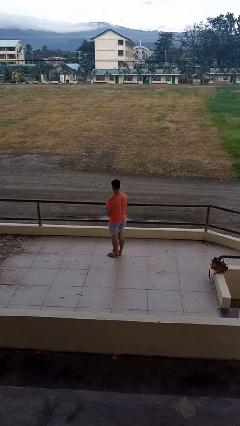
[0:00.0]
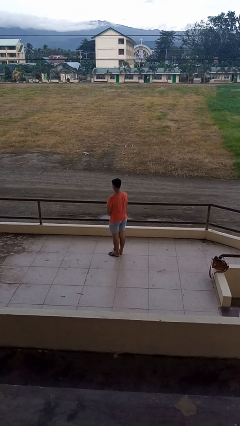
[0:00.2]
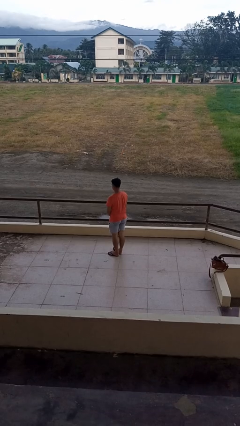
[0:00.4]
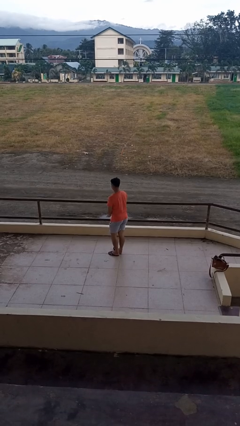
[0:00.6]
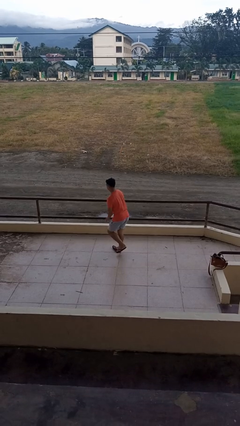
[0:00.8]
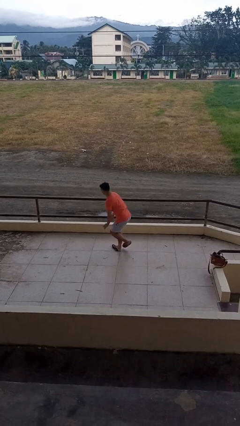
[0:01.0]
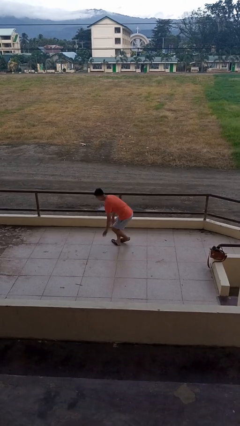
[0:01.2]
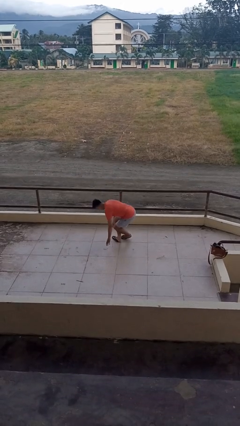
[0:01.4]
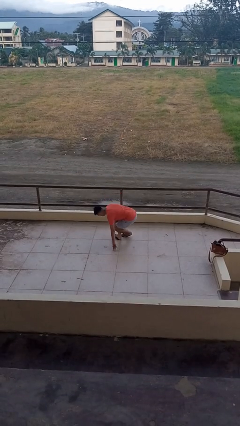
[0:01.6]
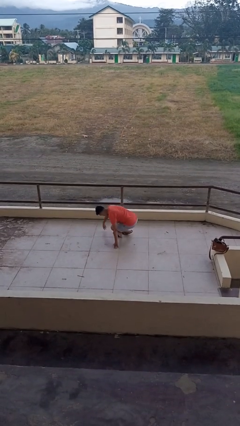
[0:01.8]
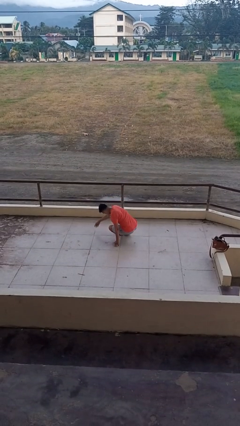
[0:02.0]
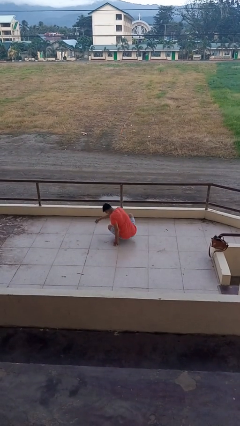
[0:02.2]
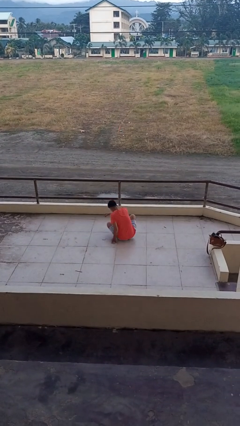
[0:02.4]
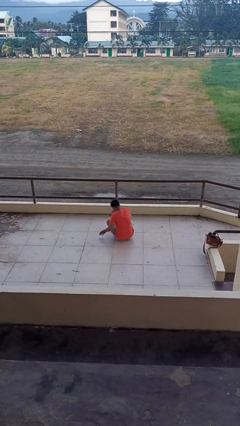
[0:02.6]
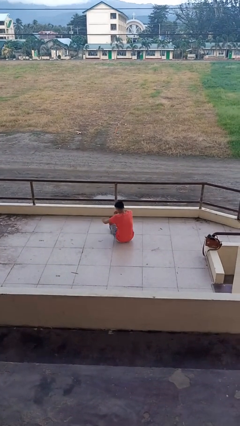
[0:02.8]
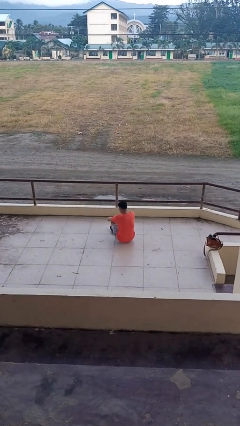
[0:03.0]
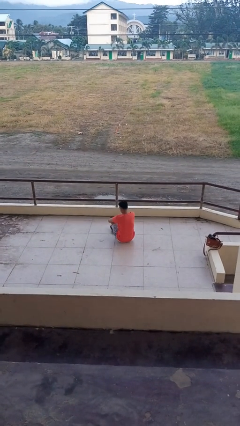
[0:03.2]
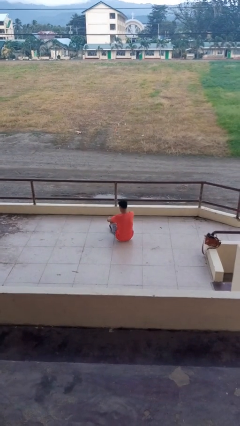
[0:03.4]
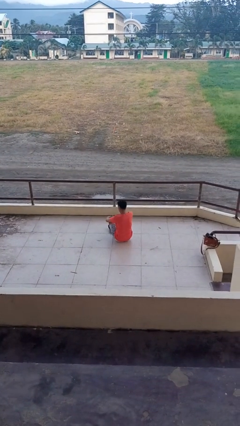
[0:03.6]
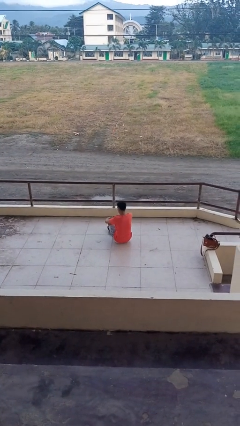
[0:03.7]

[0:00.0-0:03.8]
person sits crisscross

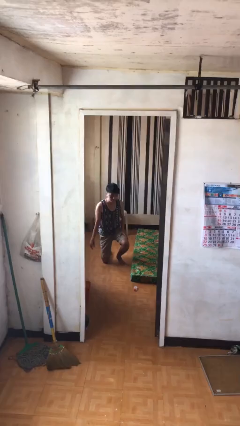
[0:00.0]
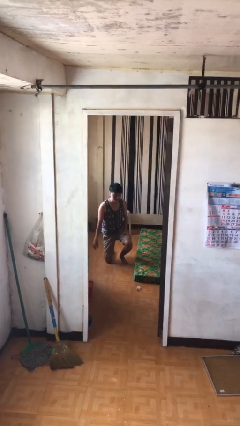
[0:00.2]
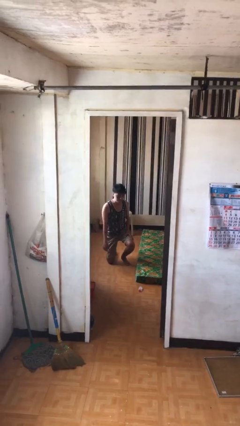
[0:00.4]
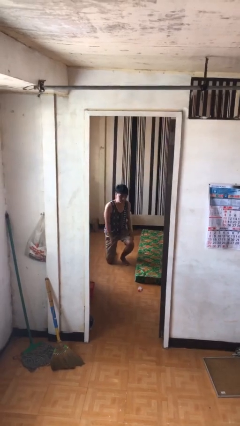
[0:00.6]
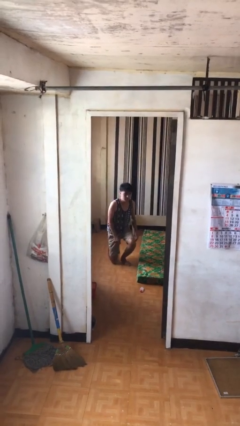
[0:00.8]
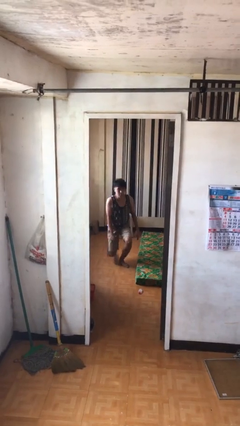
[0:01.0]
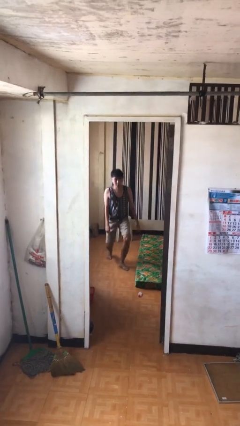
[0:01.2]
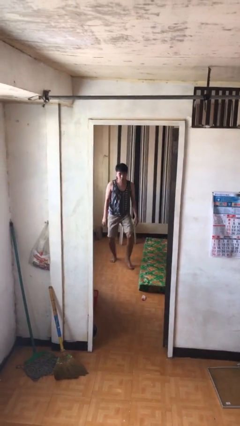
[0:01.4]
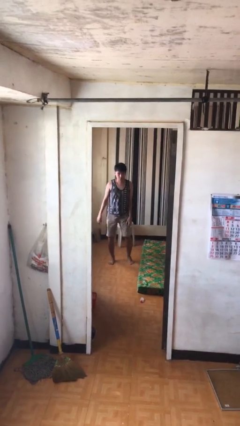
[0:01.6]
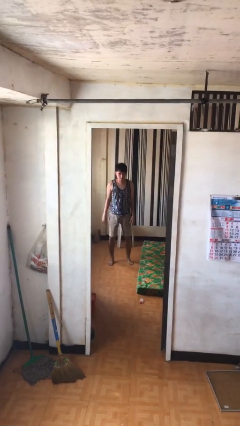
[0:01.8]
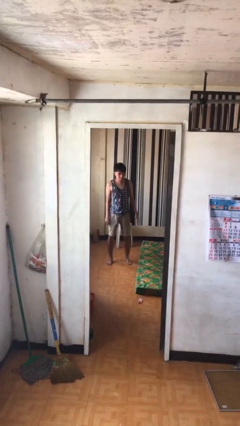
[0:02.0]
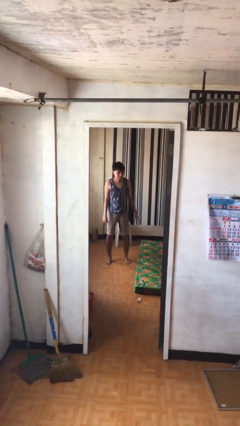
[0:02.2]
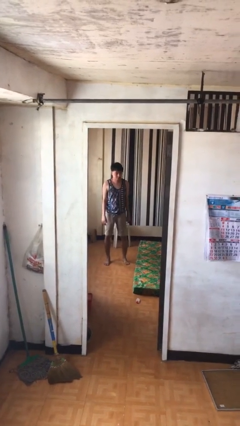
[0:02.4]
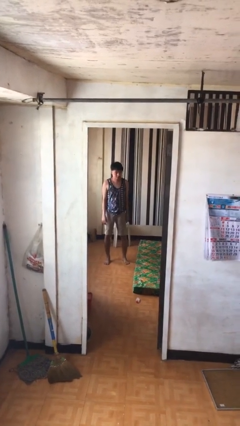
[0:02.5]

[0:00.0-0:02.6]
person stands up from floor

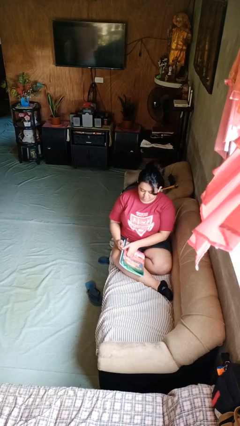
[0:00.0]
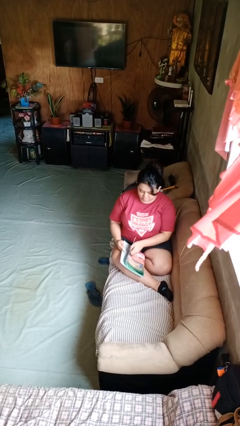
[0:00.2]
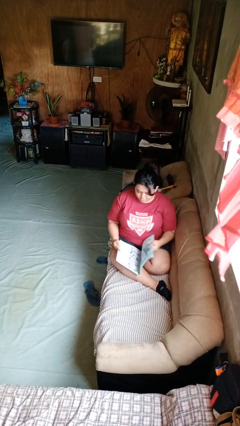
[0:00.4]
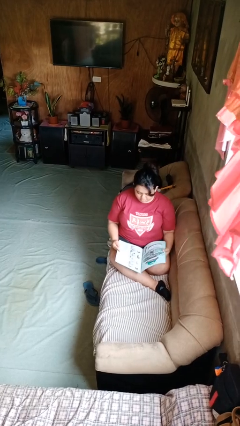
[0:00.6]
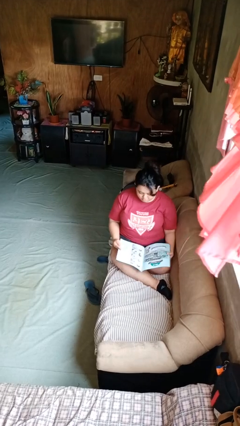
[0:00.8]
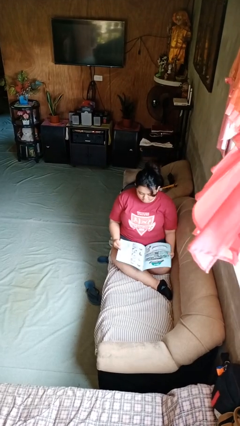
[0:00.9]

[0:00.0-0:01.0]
person reads magazine

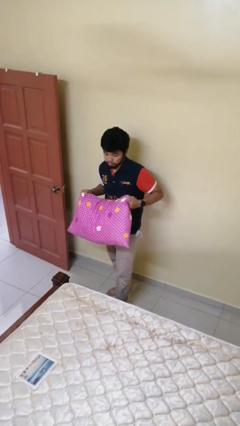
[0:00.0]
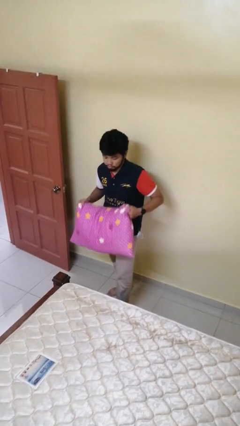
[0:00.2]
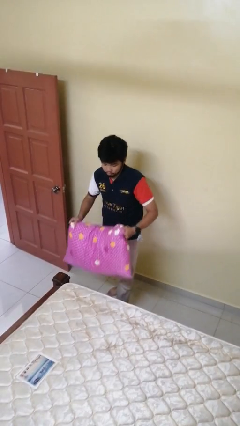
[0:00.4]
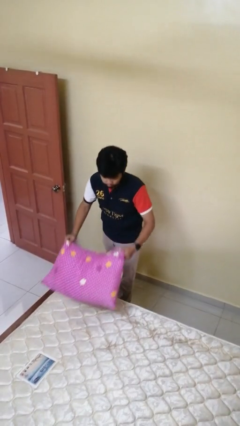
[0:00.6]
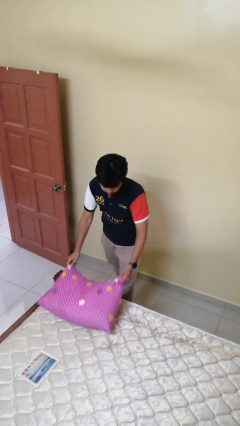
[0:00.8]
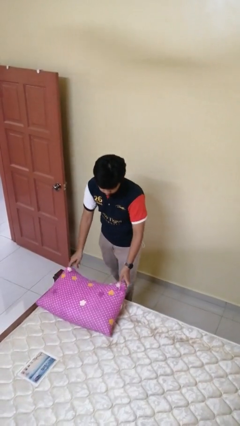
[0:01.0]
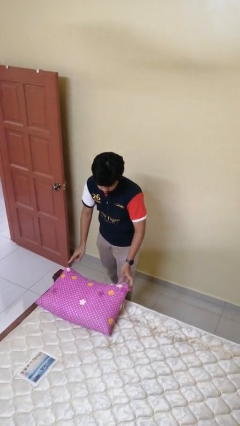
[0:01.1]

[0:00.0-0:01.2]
person puts down object on bed

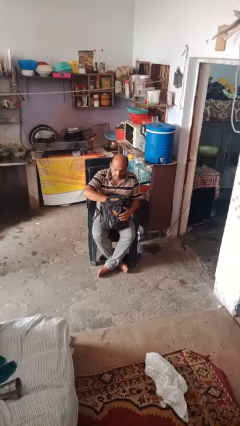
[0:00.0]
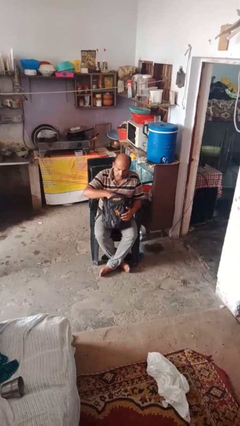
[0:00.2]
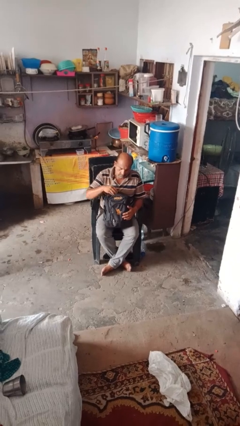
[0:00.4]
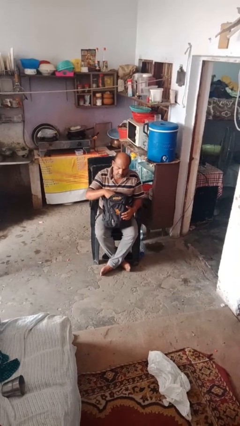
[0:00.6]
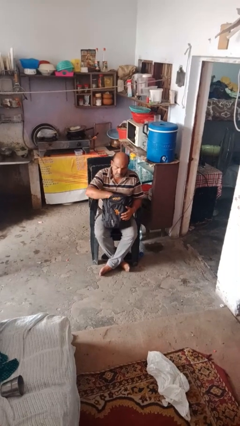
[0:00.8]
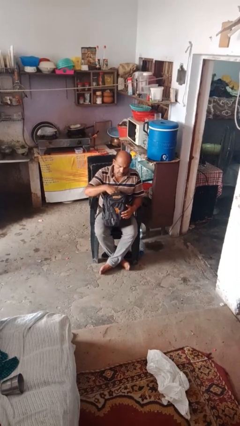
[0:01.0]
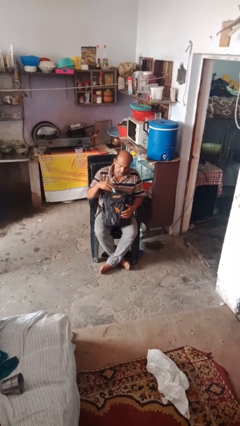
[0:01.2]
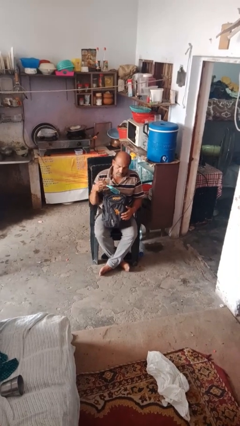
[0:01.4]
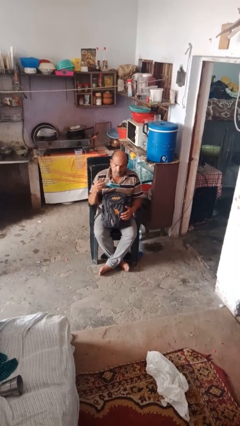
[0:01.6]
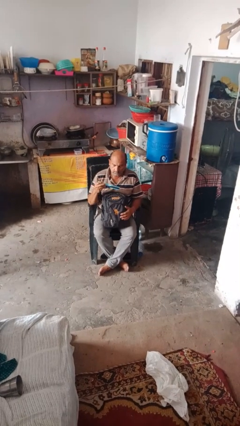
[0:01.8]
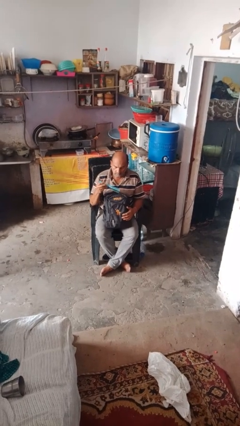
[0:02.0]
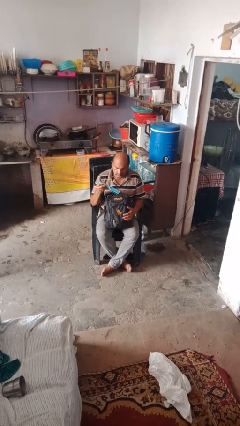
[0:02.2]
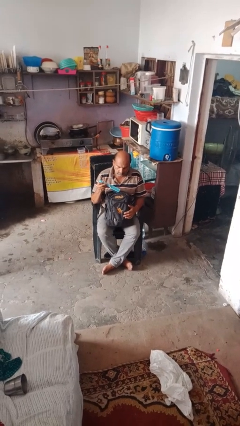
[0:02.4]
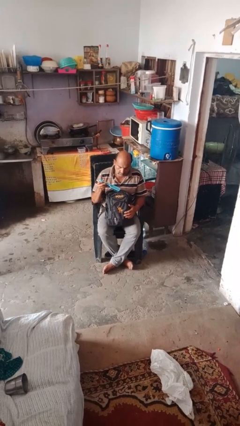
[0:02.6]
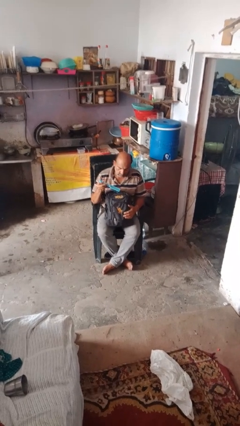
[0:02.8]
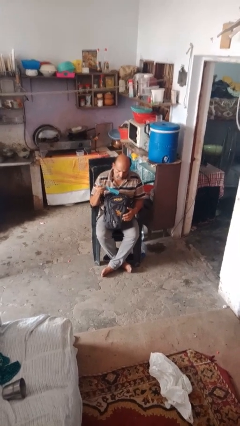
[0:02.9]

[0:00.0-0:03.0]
person takes object from backpack

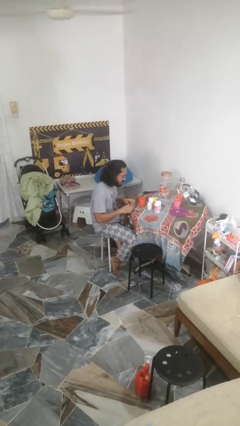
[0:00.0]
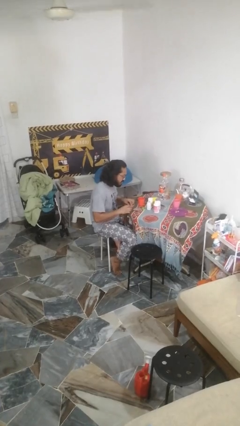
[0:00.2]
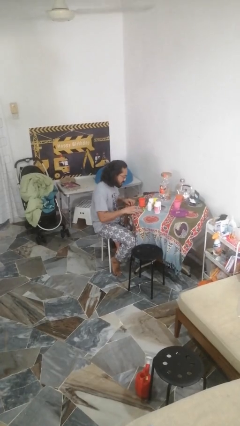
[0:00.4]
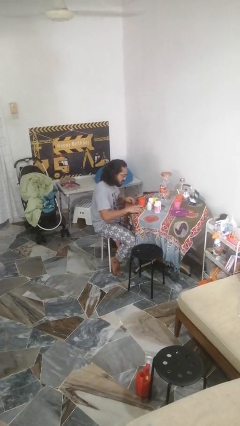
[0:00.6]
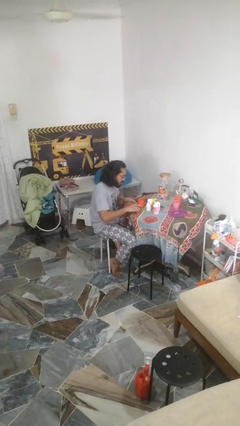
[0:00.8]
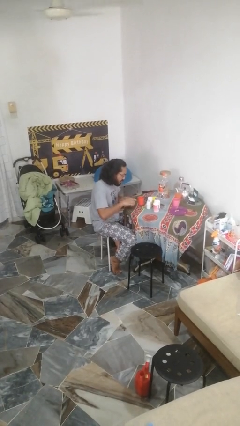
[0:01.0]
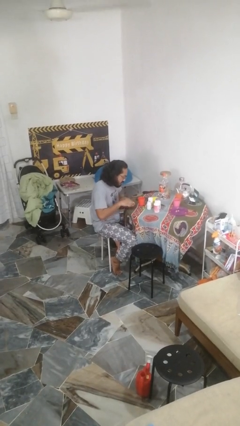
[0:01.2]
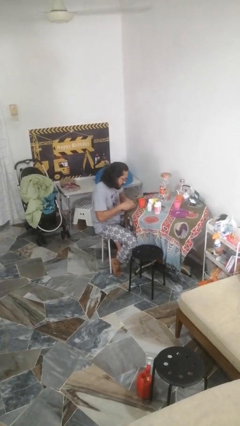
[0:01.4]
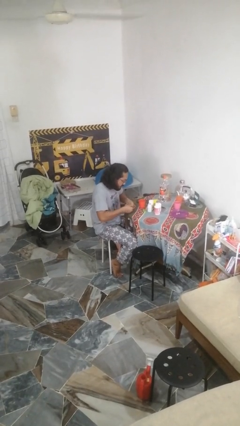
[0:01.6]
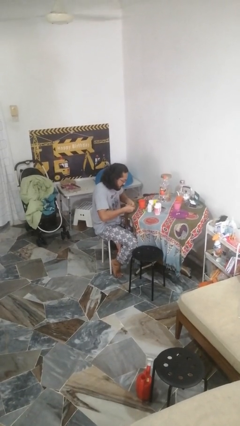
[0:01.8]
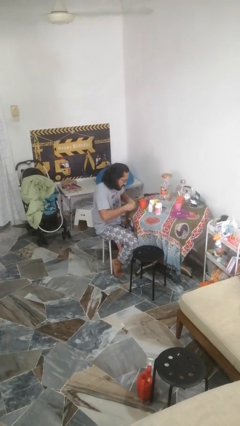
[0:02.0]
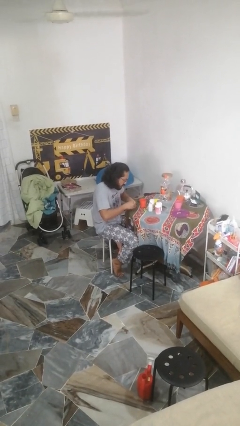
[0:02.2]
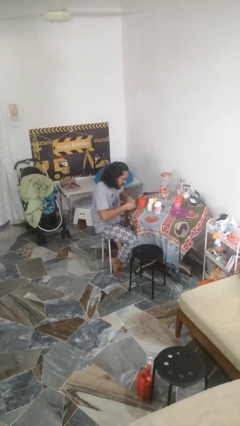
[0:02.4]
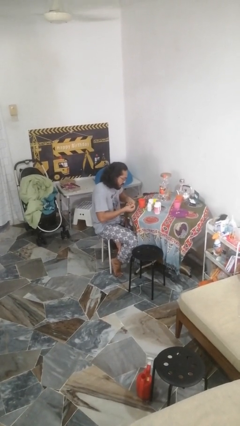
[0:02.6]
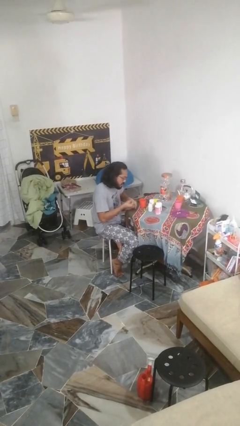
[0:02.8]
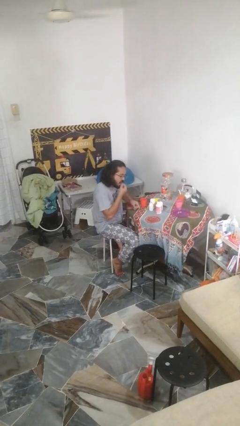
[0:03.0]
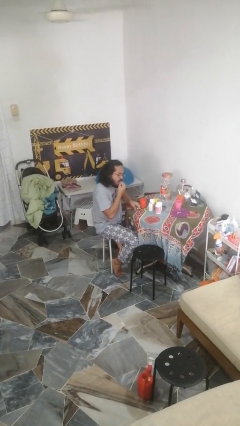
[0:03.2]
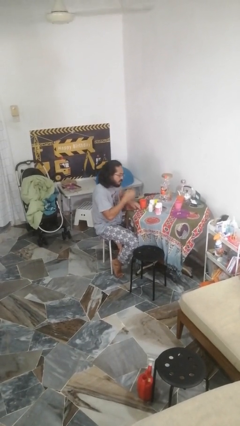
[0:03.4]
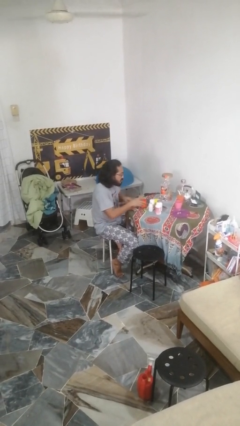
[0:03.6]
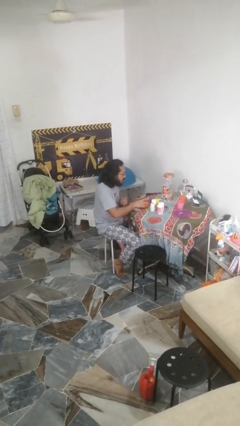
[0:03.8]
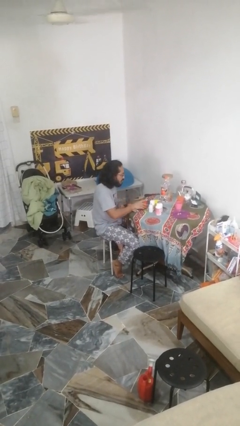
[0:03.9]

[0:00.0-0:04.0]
person takes medicine pills

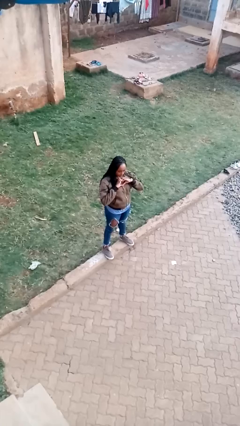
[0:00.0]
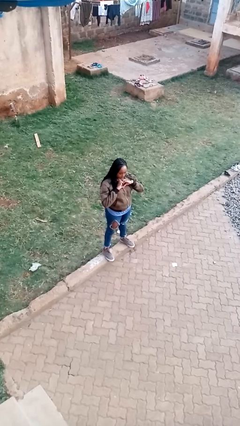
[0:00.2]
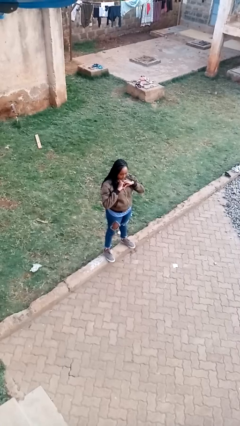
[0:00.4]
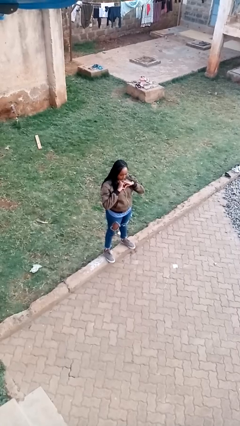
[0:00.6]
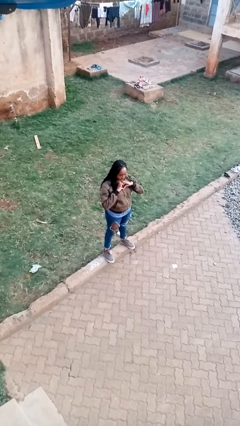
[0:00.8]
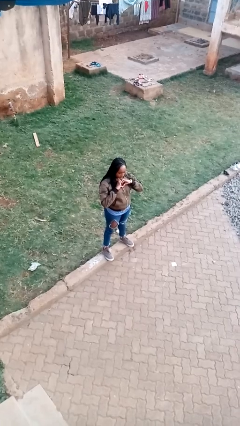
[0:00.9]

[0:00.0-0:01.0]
person gestures heart

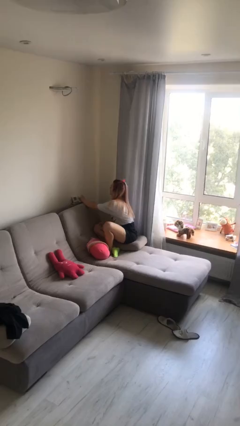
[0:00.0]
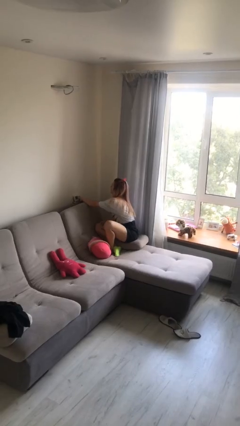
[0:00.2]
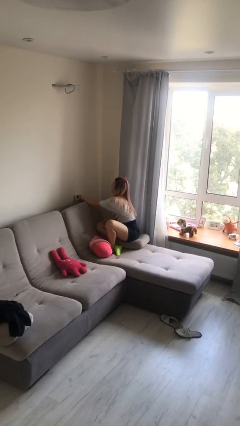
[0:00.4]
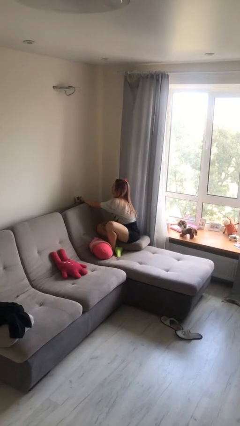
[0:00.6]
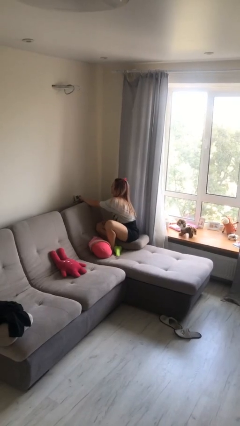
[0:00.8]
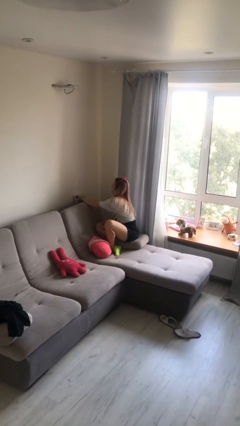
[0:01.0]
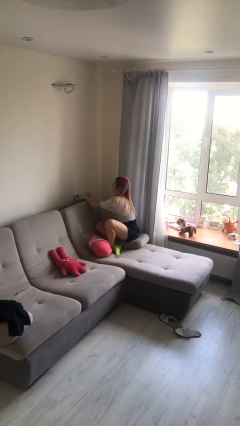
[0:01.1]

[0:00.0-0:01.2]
person adjusts thermostat
